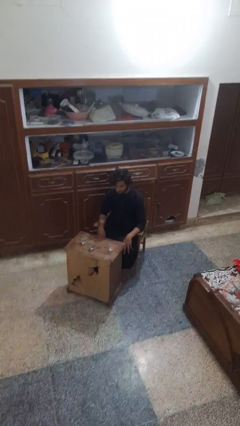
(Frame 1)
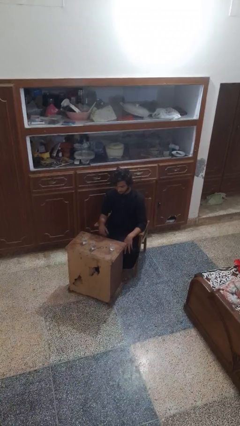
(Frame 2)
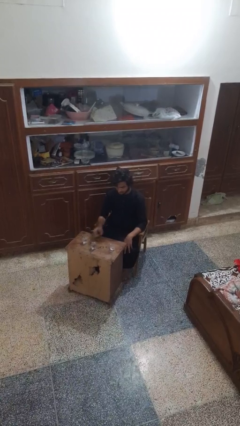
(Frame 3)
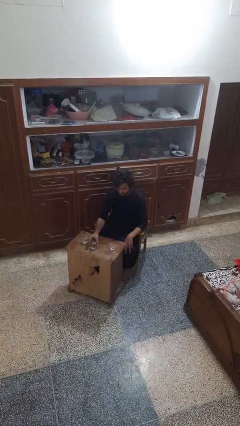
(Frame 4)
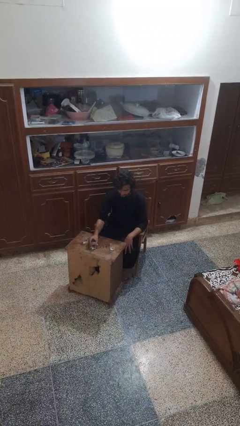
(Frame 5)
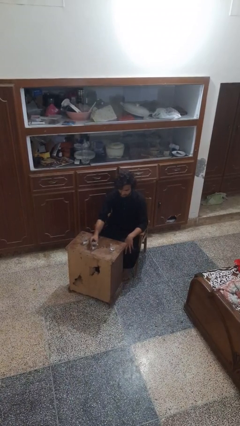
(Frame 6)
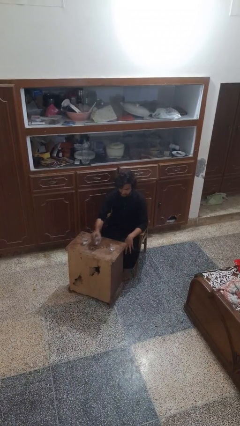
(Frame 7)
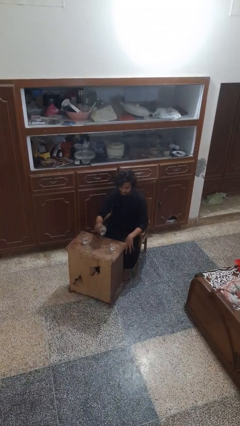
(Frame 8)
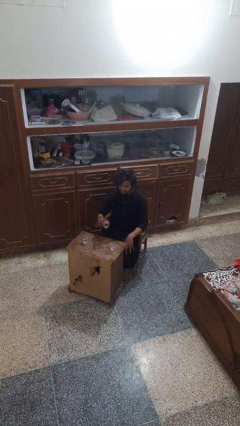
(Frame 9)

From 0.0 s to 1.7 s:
person picks up object from table

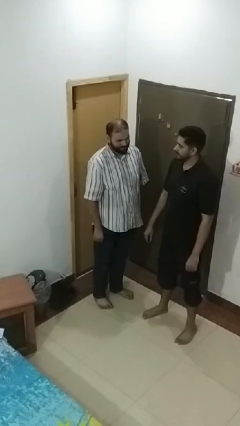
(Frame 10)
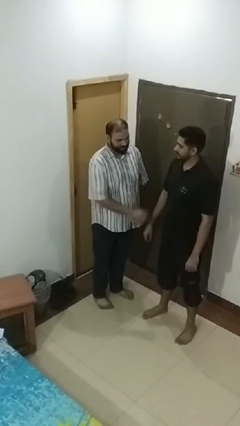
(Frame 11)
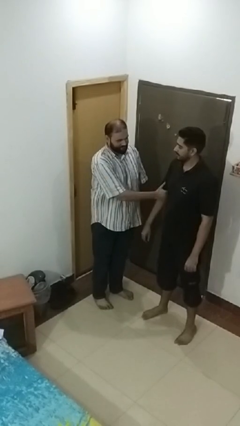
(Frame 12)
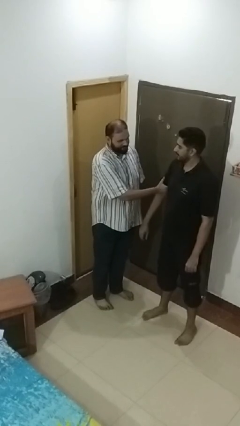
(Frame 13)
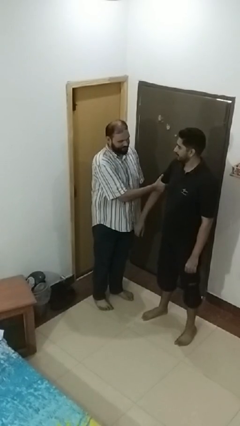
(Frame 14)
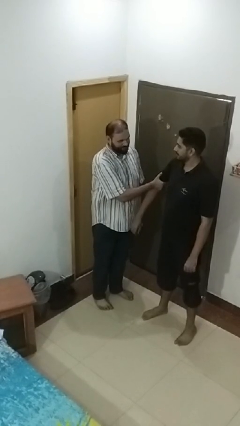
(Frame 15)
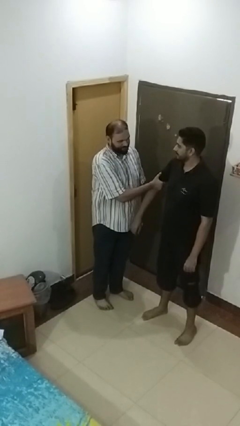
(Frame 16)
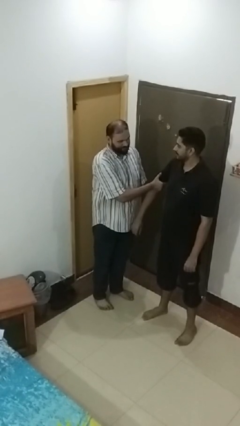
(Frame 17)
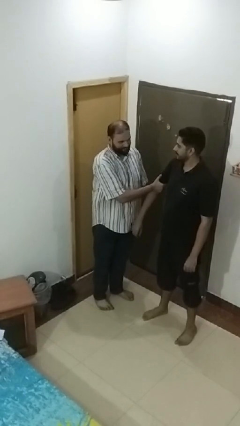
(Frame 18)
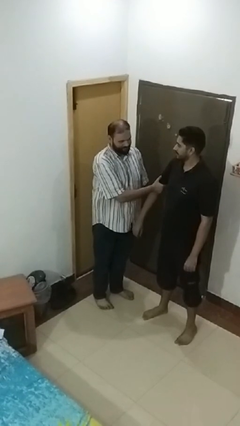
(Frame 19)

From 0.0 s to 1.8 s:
person grabs person by bicep

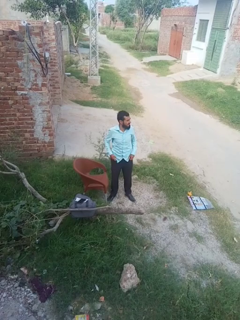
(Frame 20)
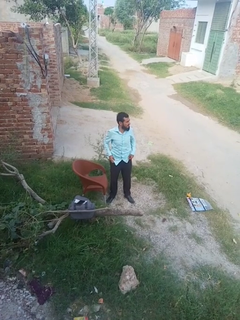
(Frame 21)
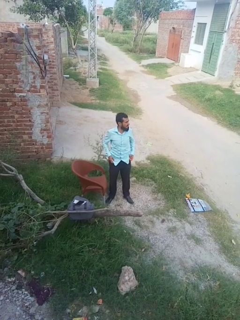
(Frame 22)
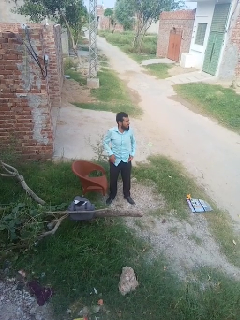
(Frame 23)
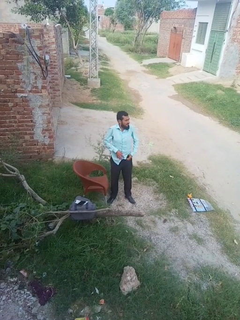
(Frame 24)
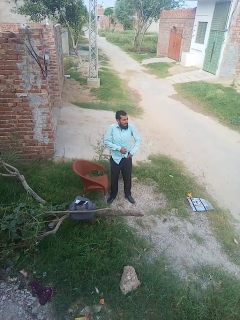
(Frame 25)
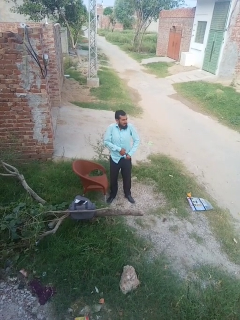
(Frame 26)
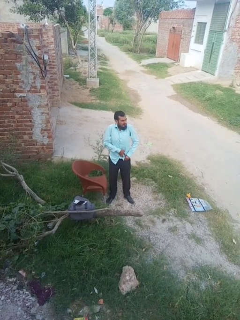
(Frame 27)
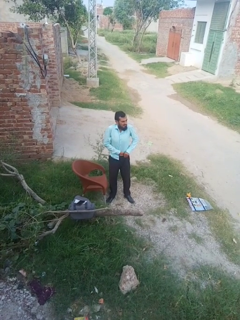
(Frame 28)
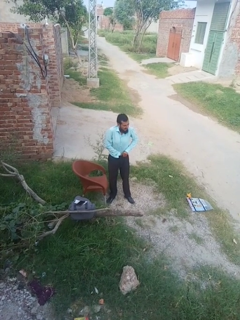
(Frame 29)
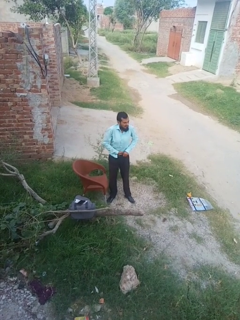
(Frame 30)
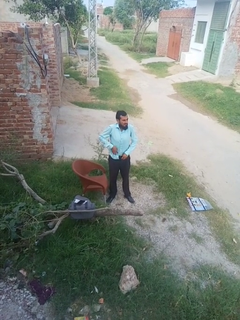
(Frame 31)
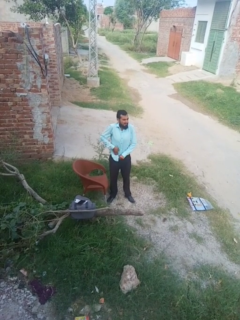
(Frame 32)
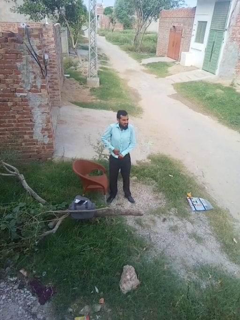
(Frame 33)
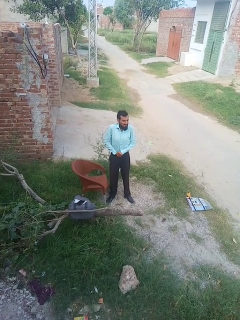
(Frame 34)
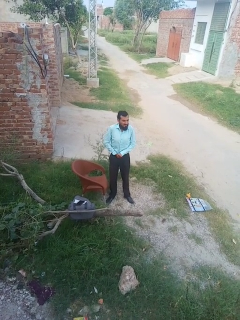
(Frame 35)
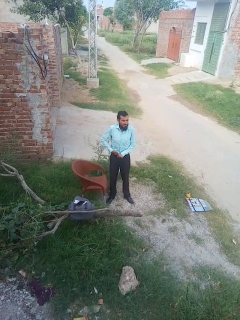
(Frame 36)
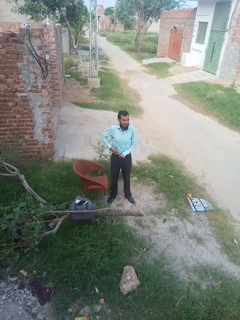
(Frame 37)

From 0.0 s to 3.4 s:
person tucks in shirt

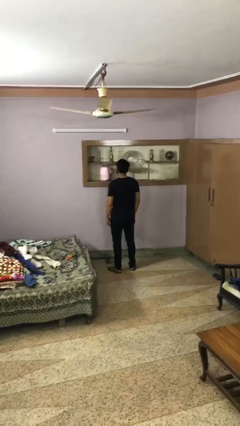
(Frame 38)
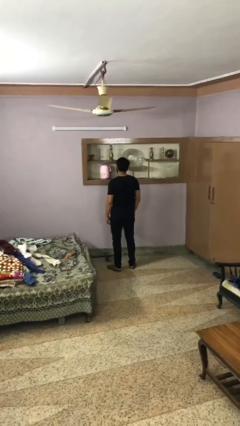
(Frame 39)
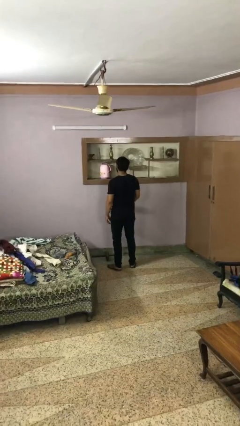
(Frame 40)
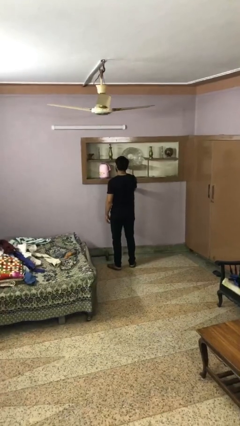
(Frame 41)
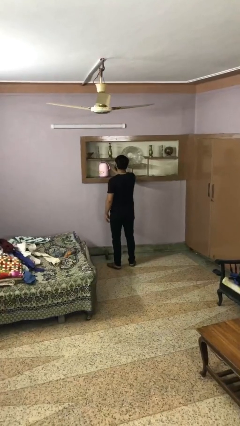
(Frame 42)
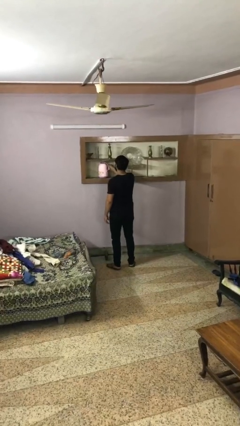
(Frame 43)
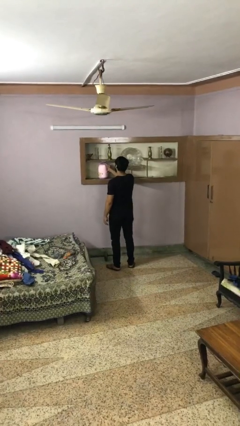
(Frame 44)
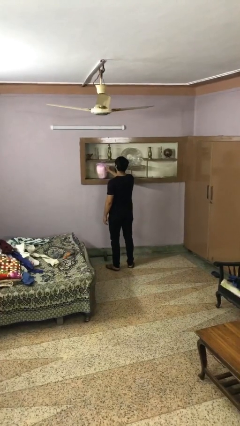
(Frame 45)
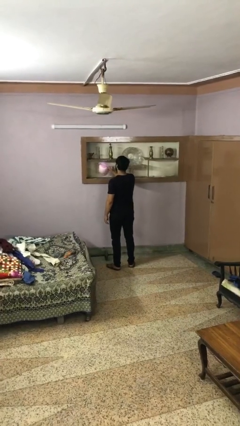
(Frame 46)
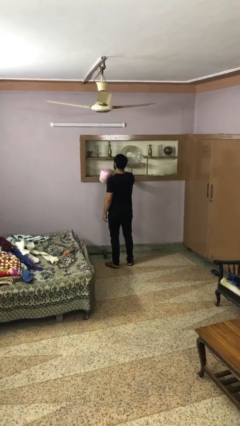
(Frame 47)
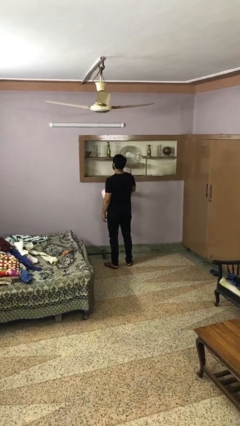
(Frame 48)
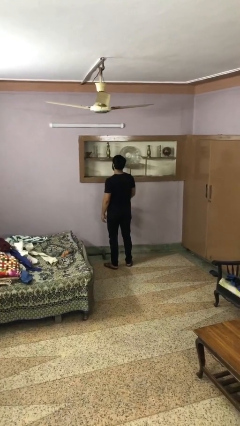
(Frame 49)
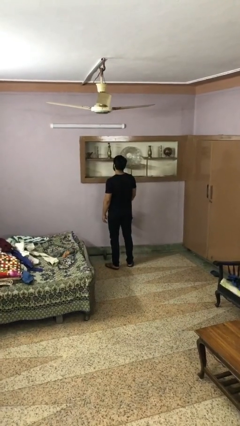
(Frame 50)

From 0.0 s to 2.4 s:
person picks up object from countertop

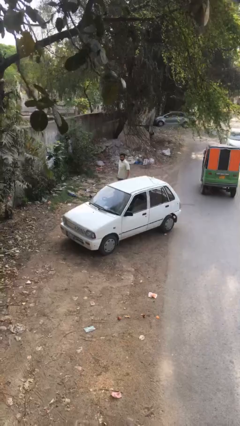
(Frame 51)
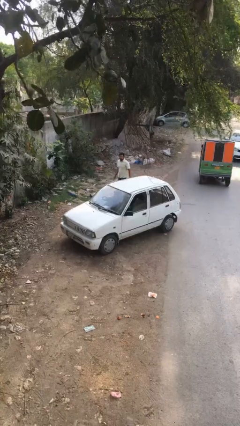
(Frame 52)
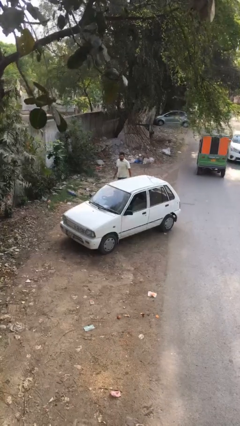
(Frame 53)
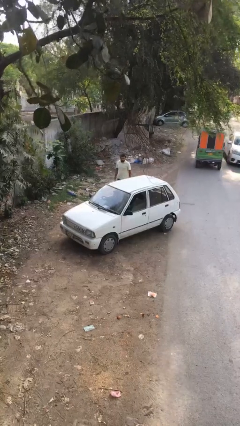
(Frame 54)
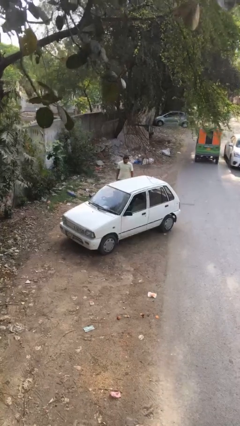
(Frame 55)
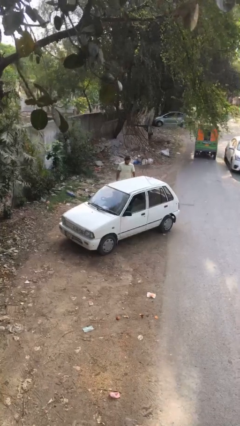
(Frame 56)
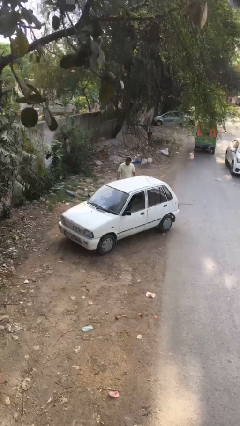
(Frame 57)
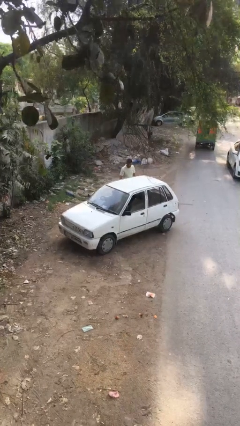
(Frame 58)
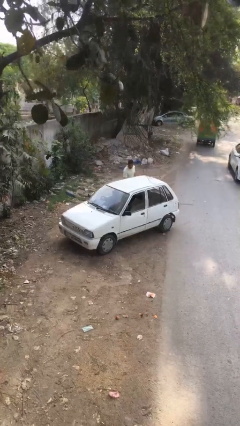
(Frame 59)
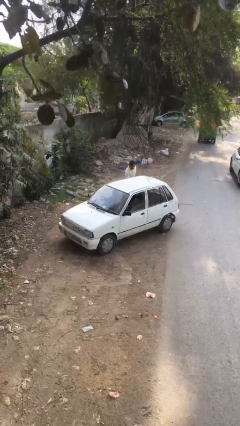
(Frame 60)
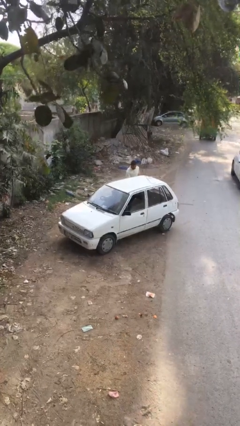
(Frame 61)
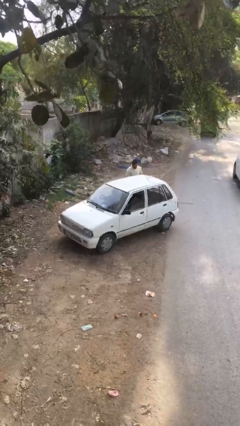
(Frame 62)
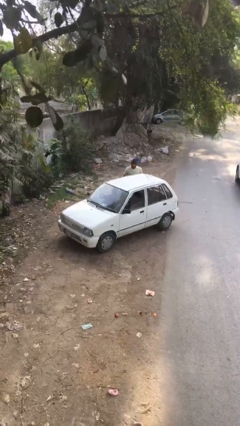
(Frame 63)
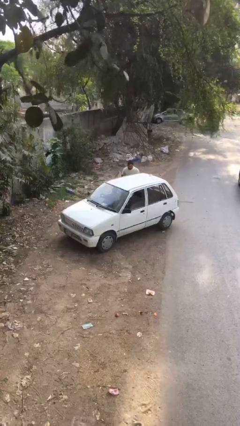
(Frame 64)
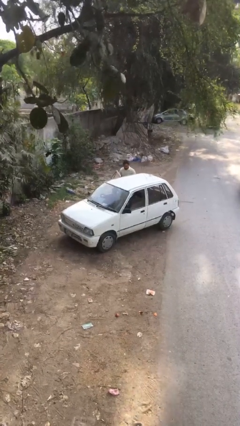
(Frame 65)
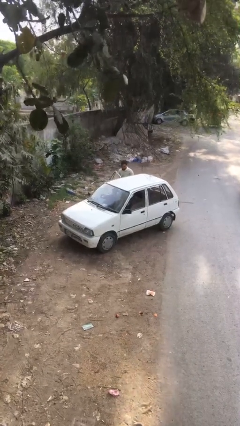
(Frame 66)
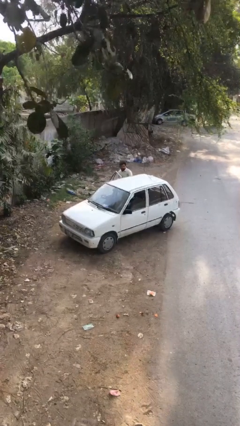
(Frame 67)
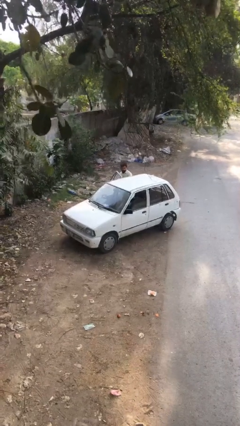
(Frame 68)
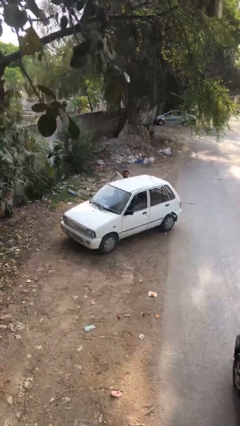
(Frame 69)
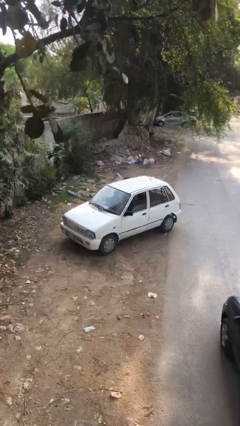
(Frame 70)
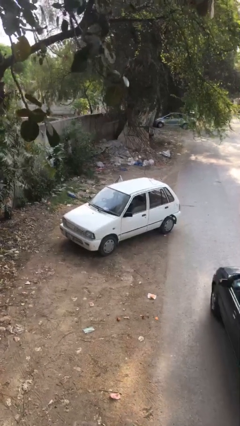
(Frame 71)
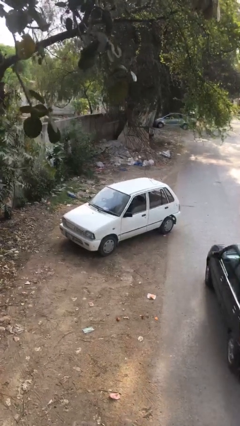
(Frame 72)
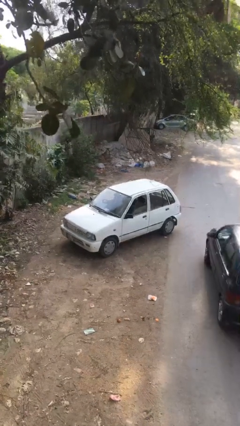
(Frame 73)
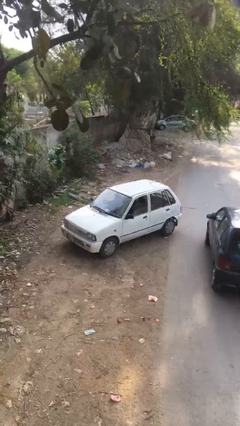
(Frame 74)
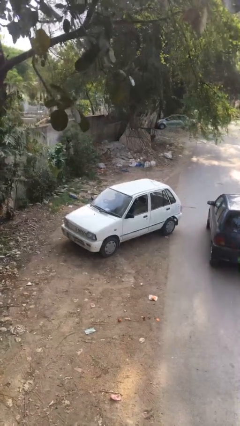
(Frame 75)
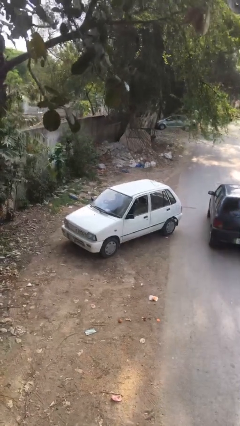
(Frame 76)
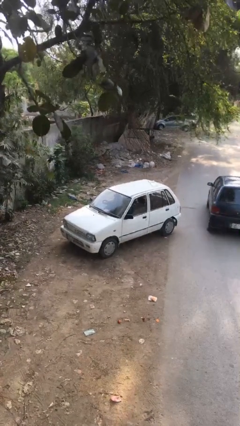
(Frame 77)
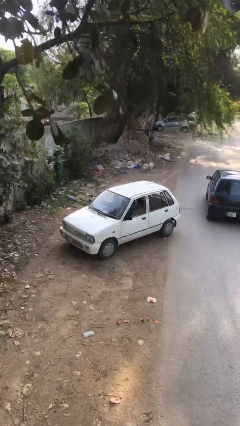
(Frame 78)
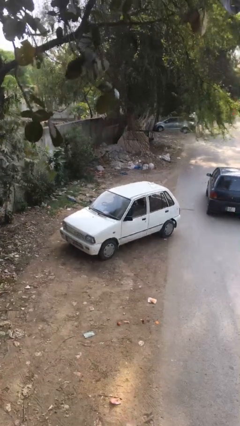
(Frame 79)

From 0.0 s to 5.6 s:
car picks up person

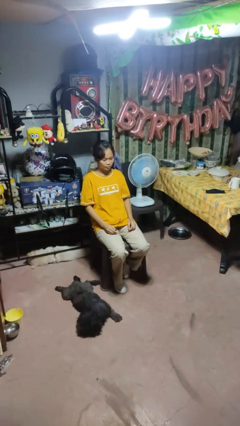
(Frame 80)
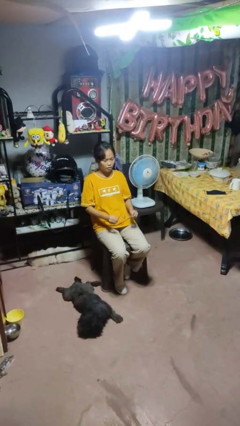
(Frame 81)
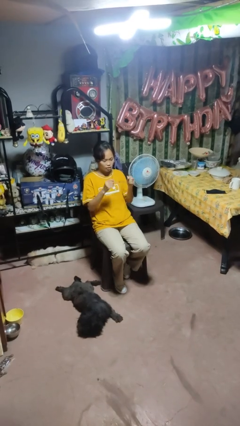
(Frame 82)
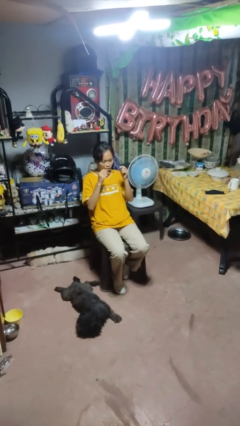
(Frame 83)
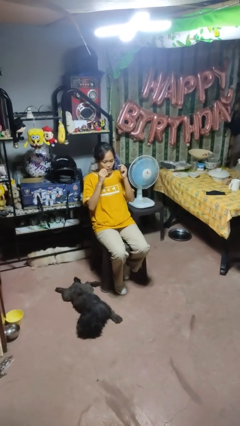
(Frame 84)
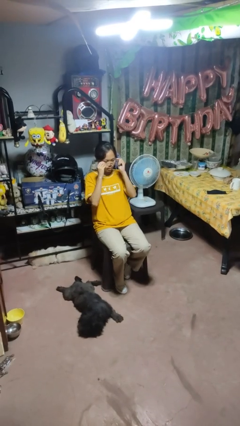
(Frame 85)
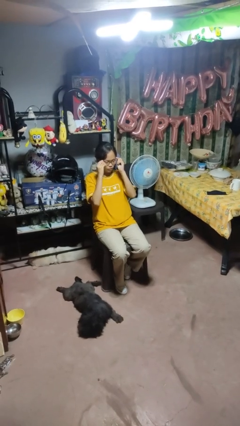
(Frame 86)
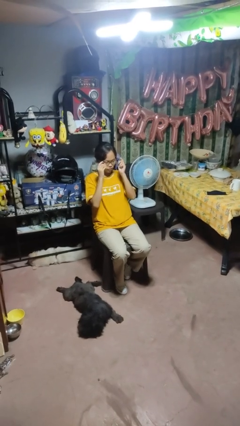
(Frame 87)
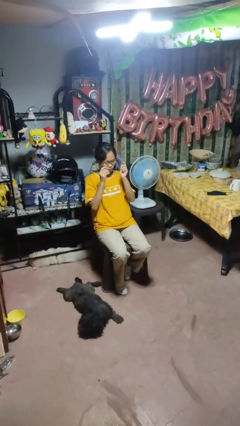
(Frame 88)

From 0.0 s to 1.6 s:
person puts on glasses

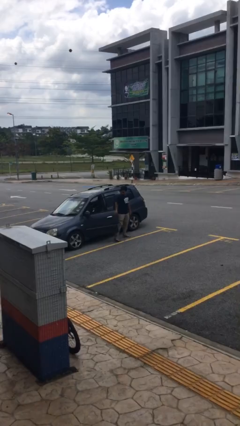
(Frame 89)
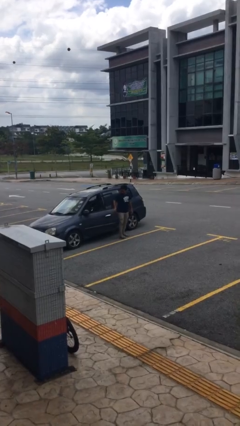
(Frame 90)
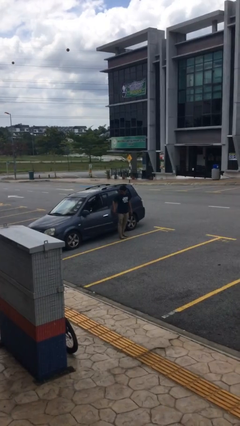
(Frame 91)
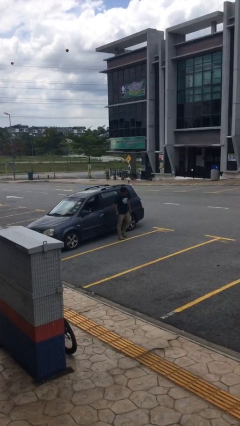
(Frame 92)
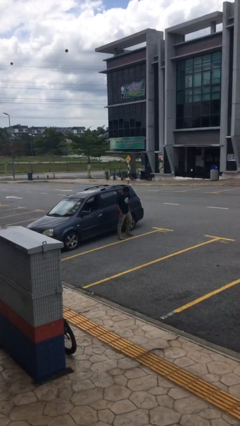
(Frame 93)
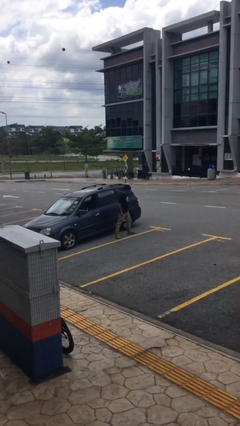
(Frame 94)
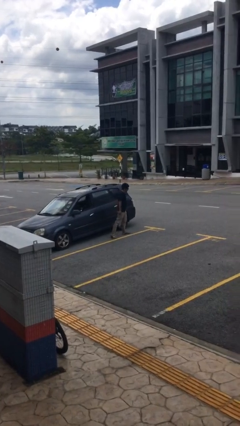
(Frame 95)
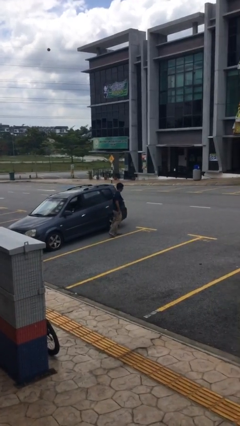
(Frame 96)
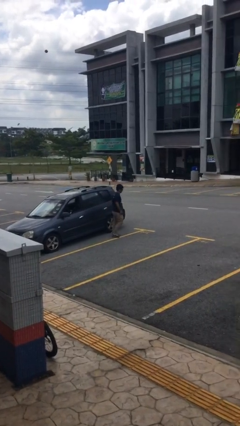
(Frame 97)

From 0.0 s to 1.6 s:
person closes car door
